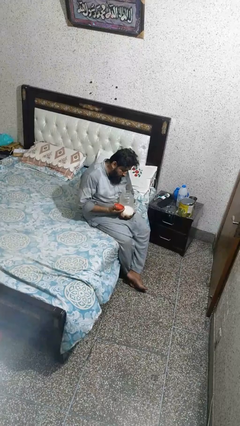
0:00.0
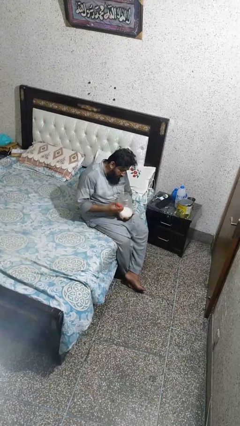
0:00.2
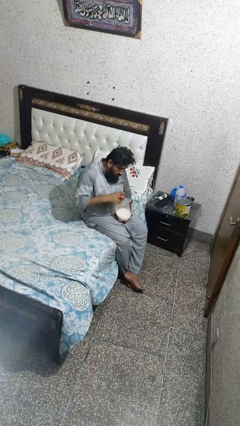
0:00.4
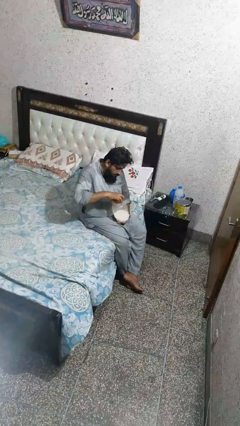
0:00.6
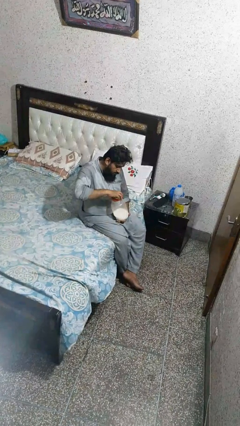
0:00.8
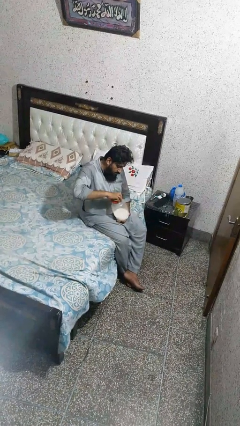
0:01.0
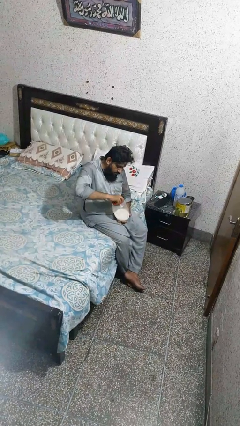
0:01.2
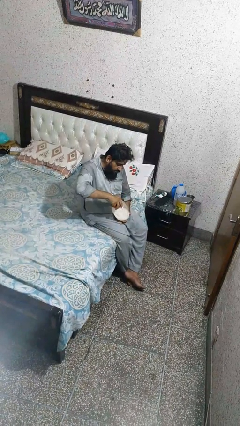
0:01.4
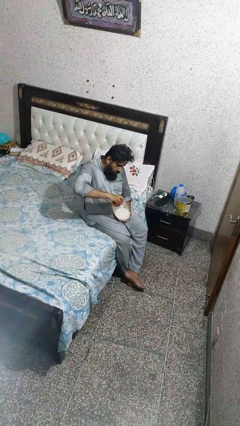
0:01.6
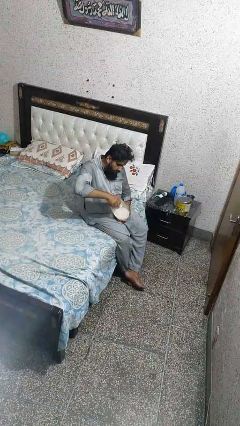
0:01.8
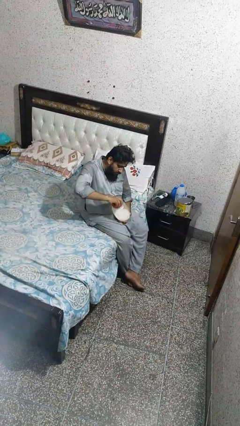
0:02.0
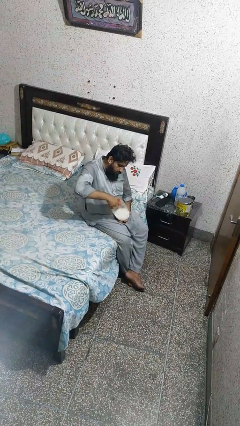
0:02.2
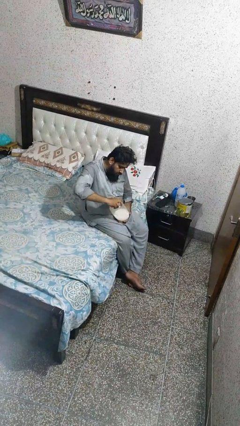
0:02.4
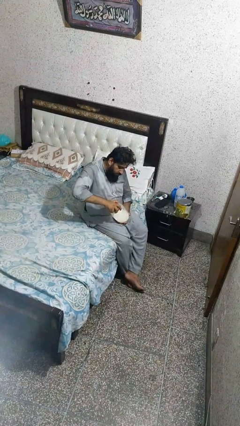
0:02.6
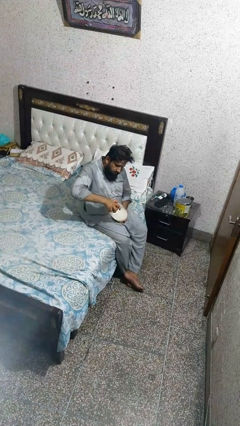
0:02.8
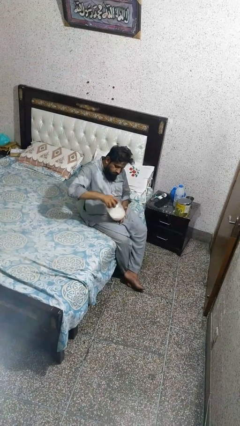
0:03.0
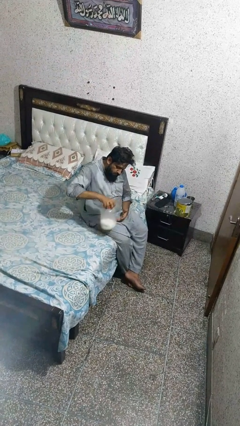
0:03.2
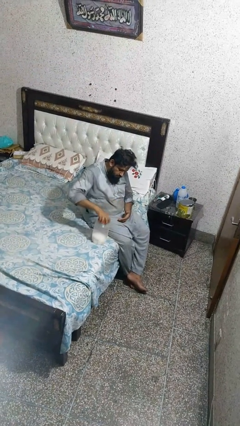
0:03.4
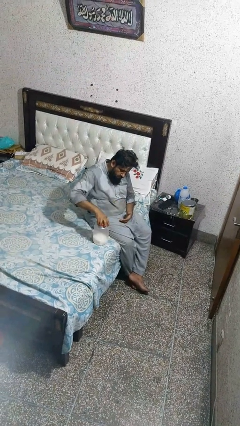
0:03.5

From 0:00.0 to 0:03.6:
person closes jar

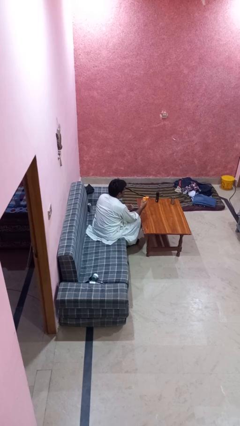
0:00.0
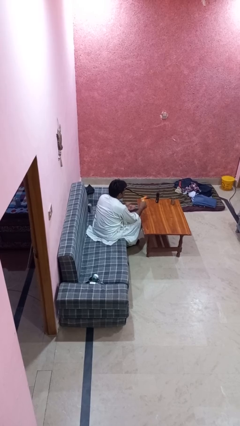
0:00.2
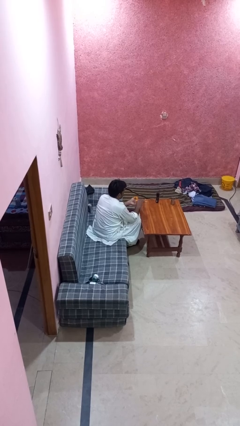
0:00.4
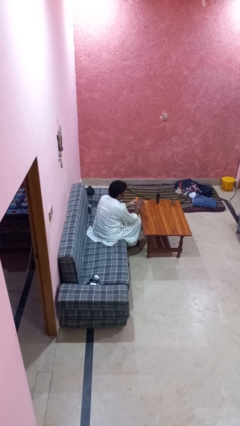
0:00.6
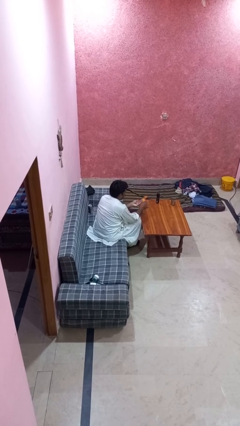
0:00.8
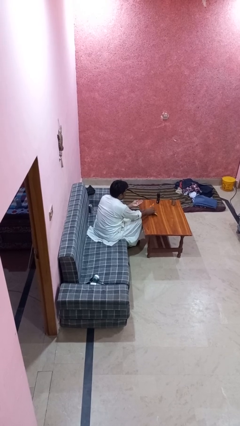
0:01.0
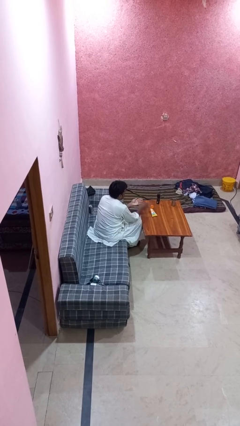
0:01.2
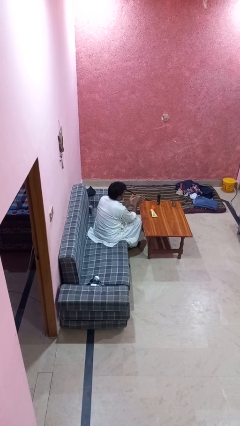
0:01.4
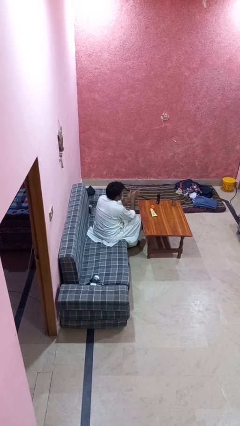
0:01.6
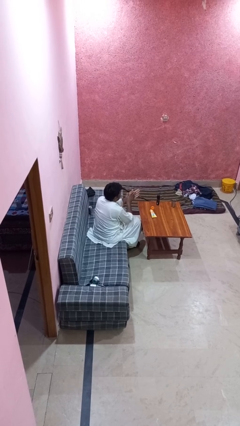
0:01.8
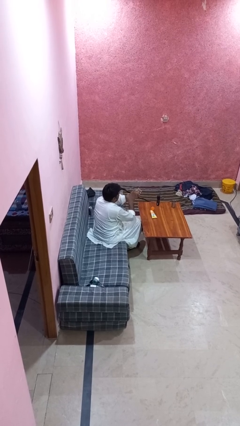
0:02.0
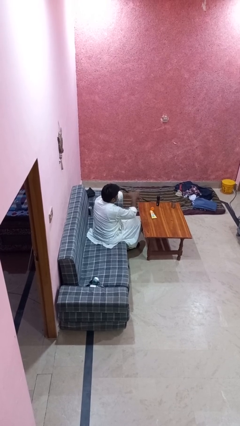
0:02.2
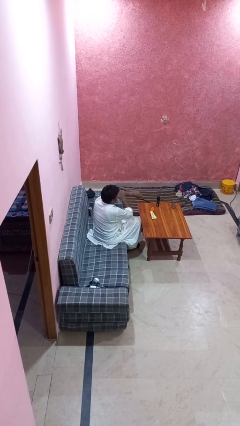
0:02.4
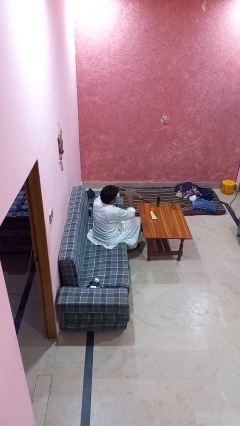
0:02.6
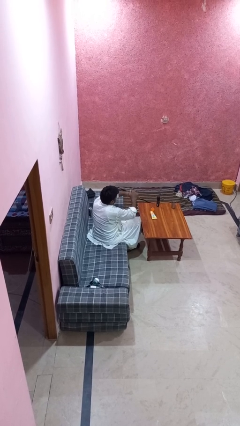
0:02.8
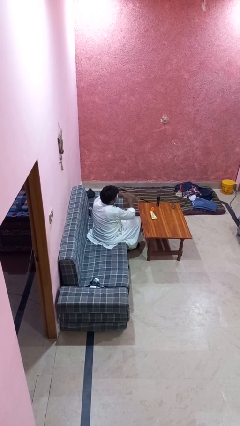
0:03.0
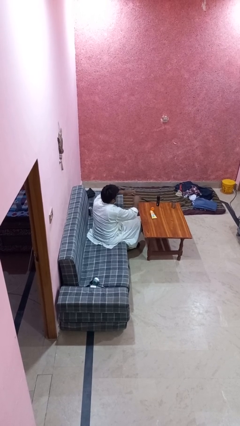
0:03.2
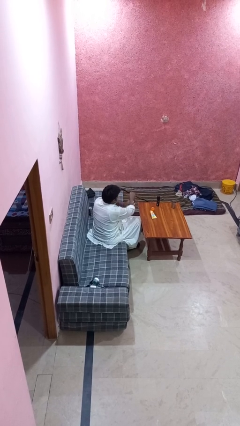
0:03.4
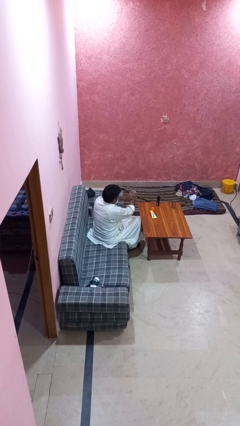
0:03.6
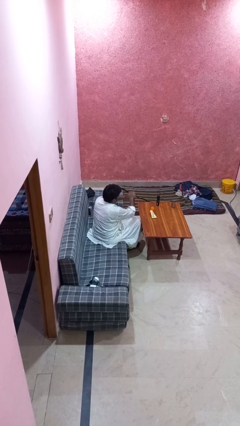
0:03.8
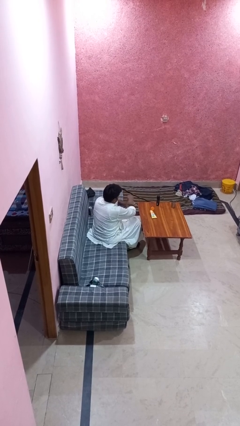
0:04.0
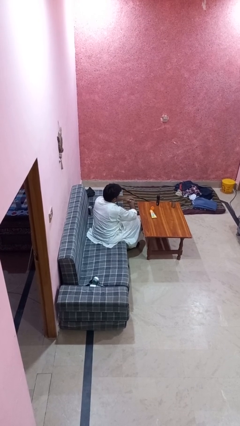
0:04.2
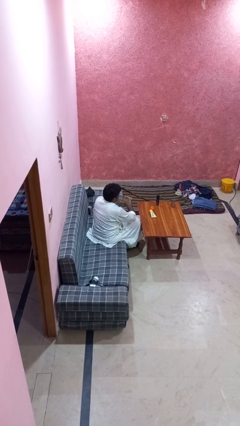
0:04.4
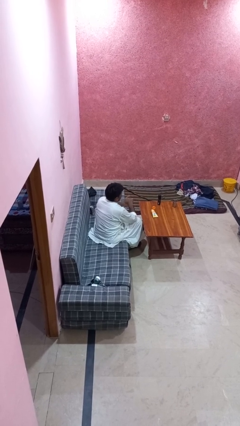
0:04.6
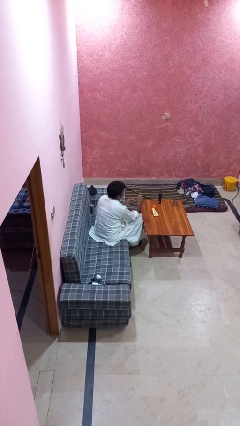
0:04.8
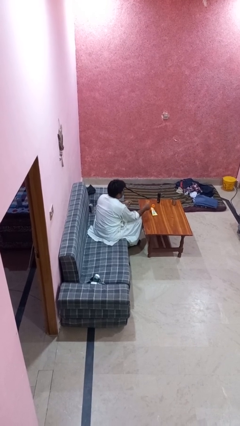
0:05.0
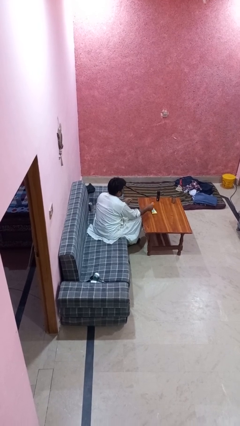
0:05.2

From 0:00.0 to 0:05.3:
person applies sunscreen

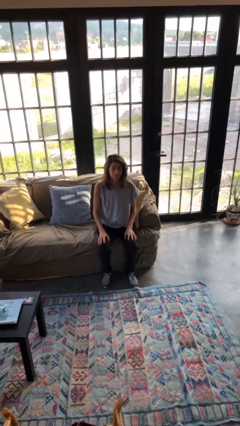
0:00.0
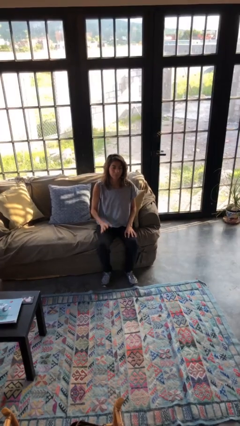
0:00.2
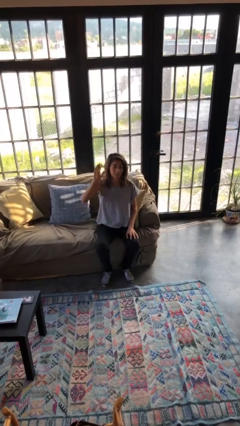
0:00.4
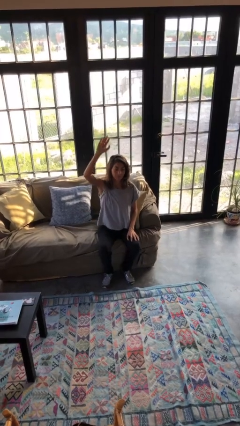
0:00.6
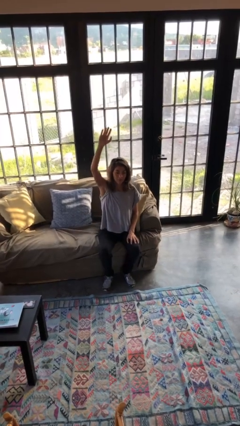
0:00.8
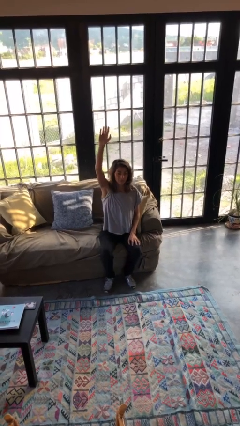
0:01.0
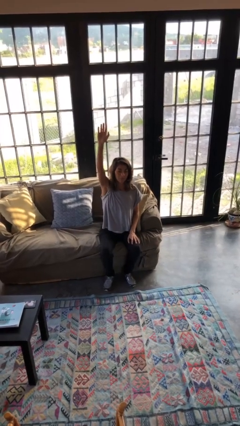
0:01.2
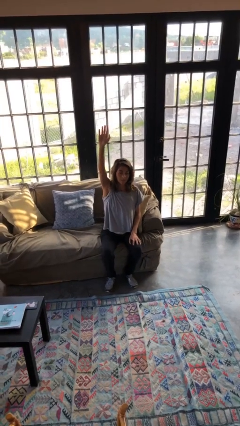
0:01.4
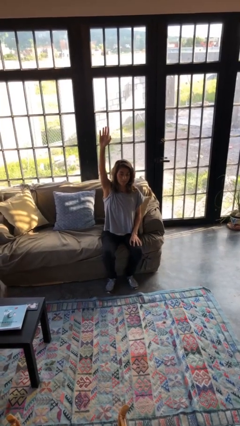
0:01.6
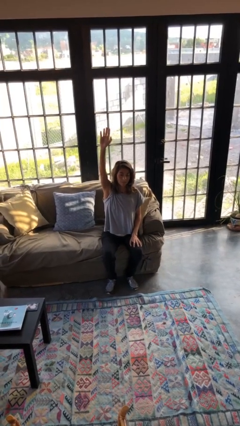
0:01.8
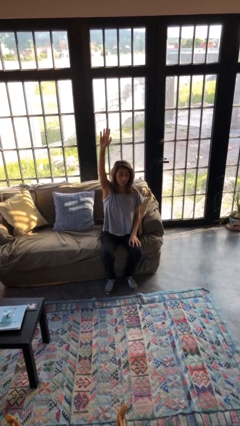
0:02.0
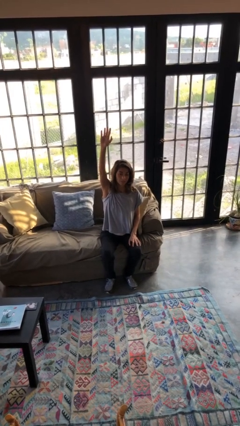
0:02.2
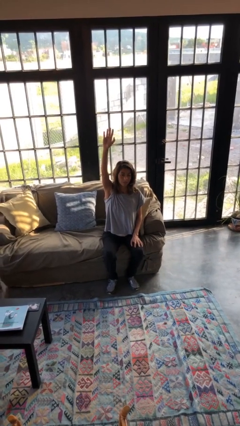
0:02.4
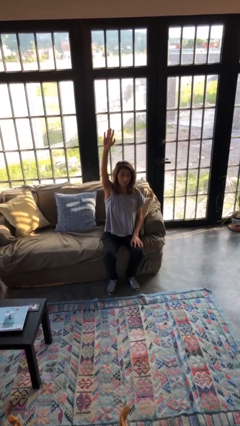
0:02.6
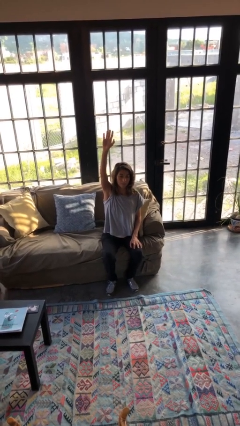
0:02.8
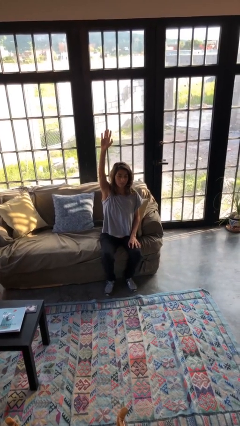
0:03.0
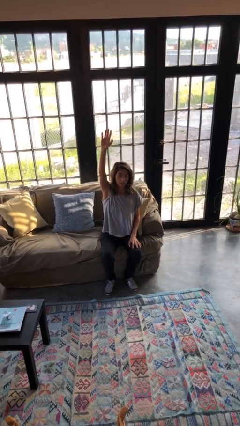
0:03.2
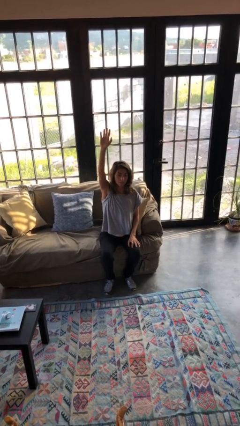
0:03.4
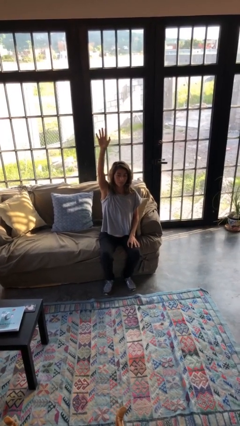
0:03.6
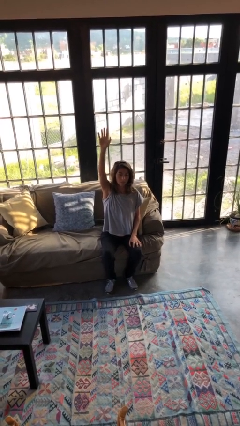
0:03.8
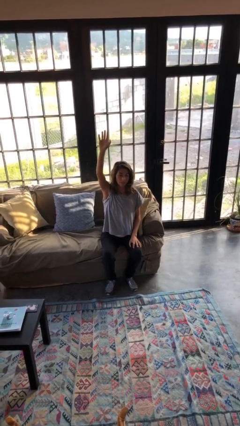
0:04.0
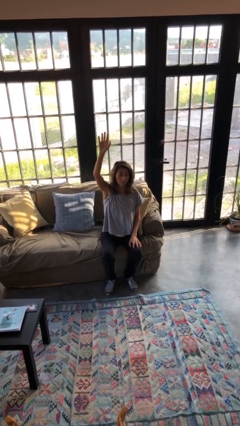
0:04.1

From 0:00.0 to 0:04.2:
person gestures raise hand

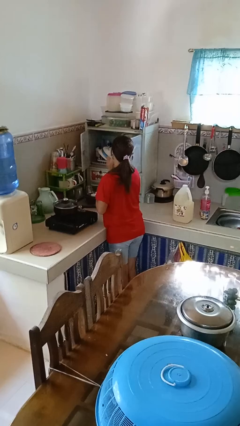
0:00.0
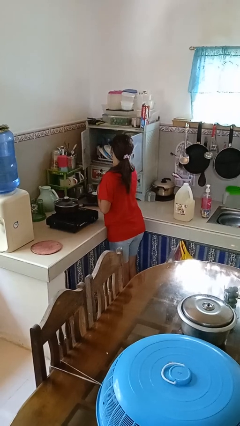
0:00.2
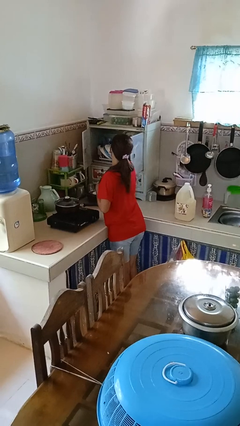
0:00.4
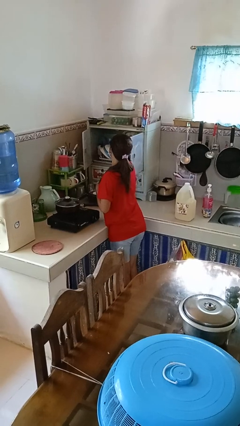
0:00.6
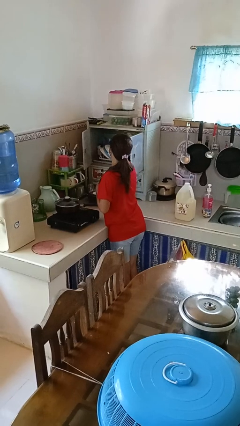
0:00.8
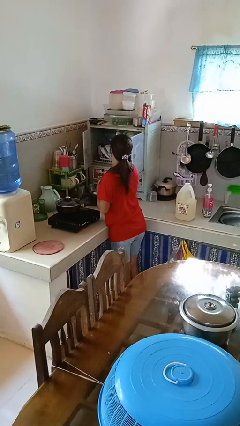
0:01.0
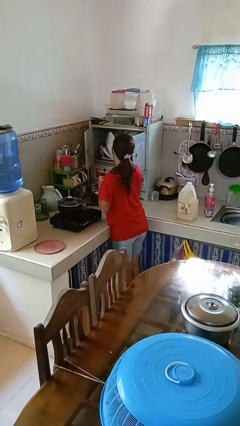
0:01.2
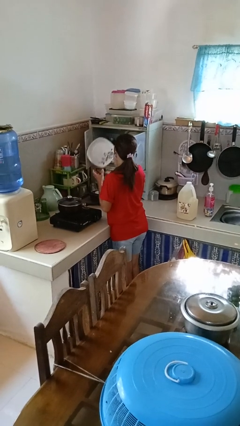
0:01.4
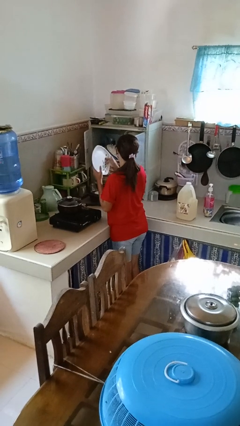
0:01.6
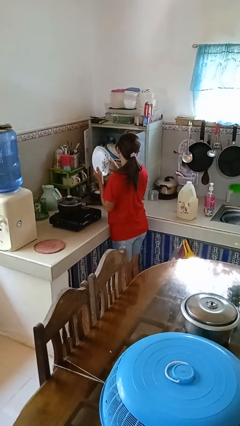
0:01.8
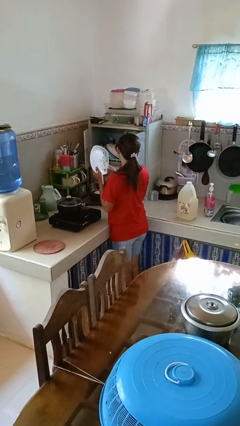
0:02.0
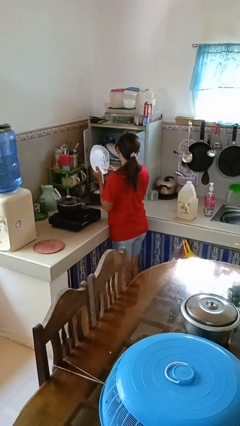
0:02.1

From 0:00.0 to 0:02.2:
person takes object from cabinet

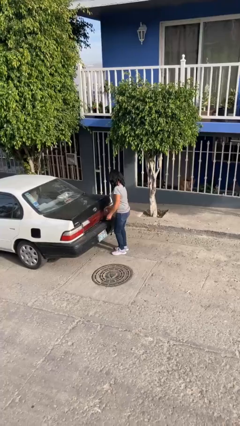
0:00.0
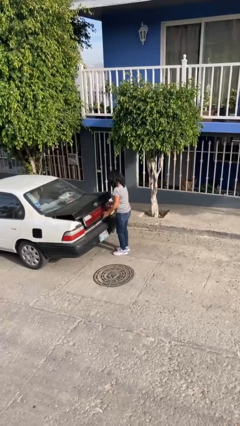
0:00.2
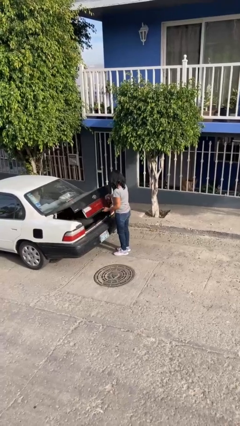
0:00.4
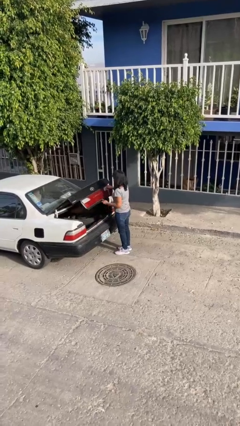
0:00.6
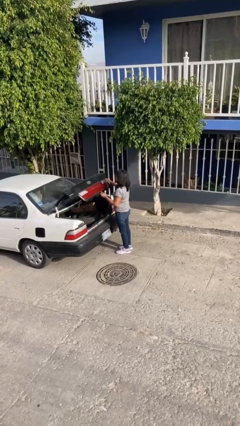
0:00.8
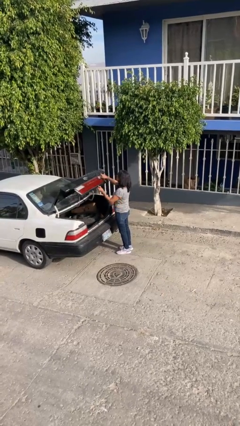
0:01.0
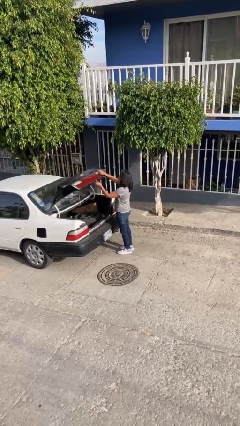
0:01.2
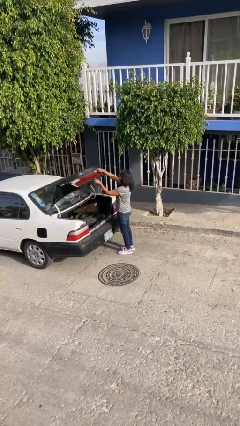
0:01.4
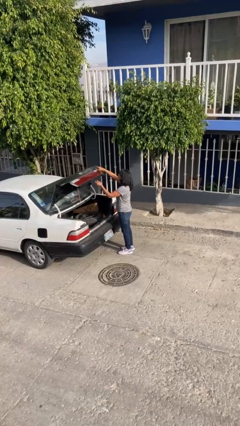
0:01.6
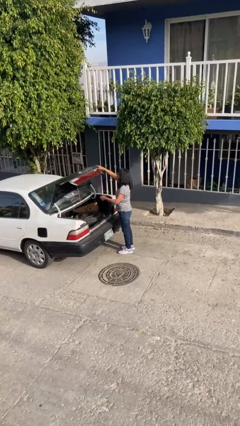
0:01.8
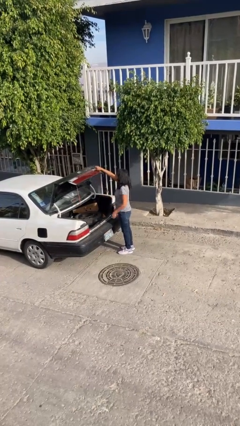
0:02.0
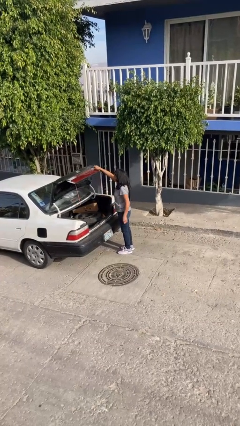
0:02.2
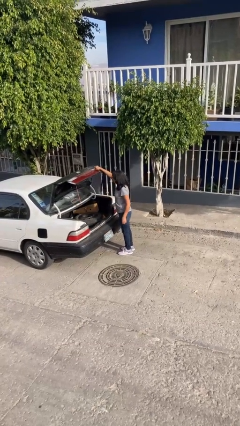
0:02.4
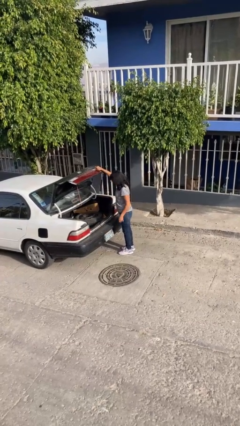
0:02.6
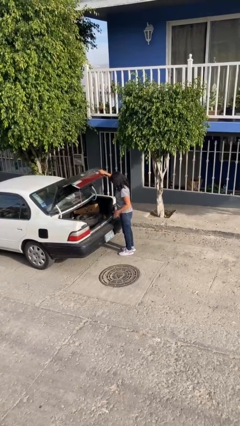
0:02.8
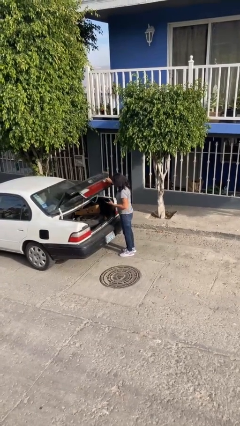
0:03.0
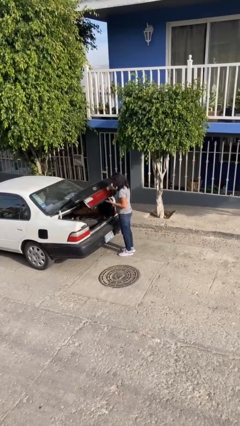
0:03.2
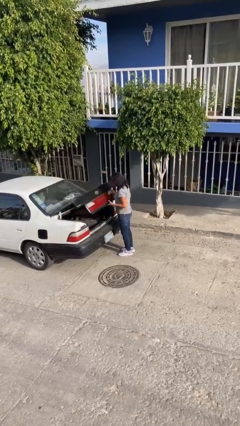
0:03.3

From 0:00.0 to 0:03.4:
person opens car trunk
